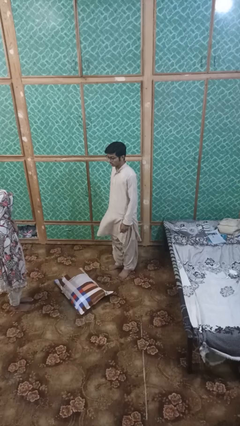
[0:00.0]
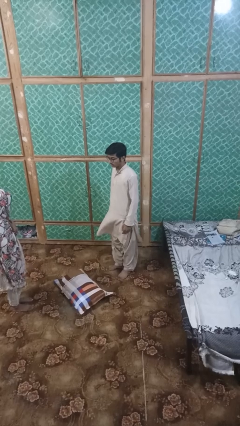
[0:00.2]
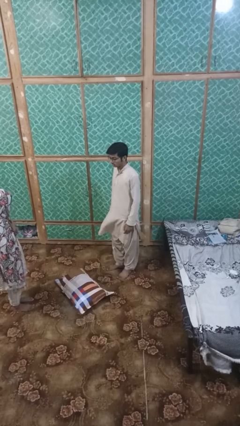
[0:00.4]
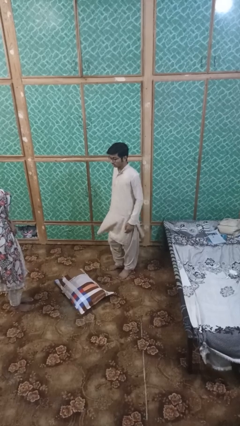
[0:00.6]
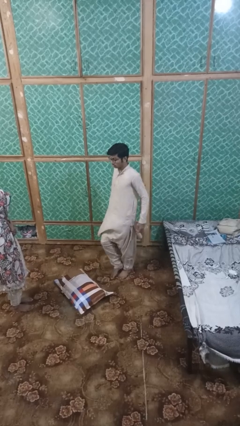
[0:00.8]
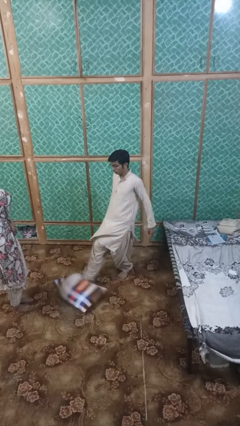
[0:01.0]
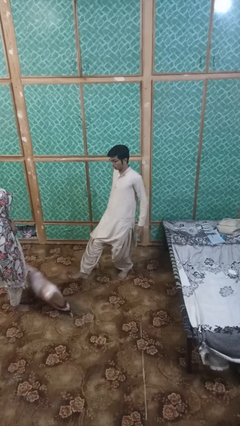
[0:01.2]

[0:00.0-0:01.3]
person kicks object to person

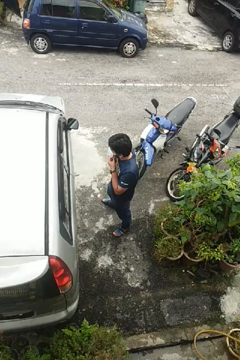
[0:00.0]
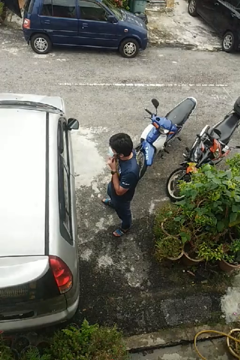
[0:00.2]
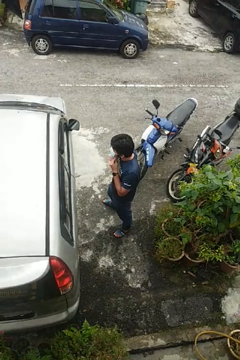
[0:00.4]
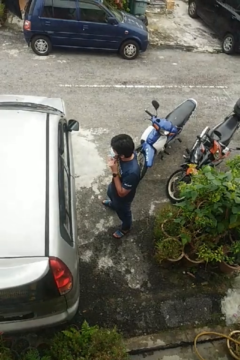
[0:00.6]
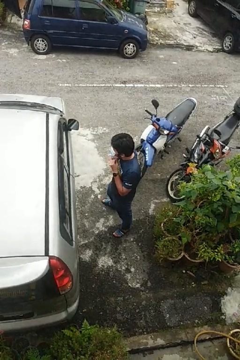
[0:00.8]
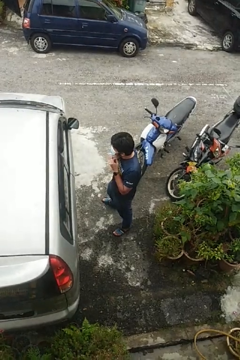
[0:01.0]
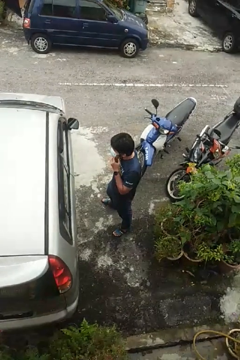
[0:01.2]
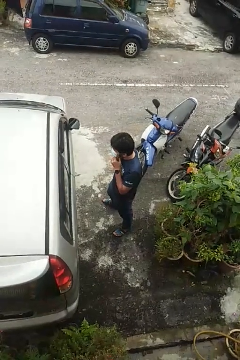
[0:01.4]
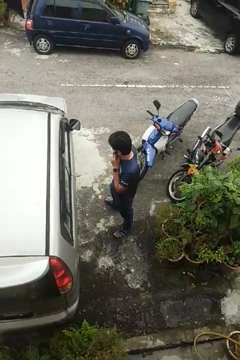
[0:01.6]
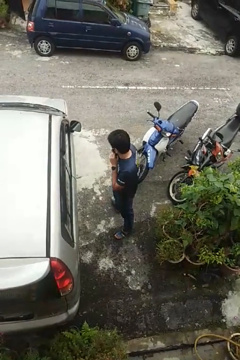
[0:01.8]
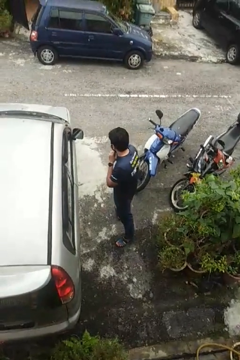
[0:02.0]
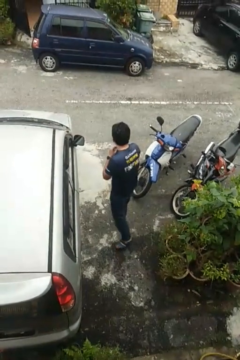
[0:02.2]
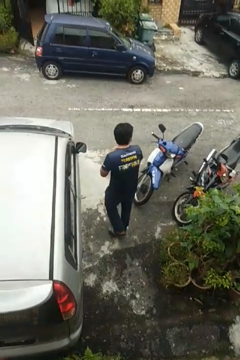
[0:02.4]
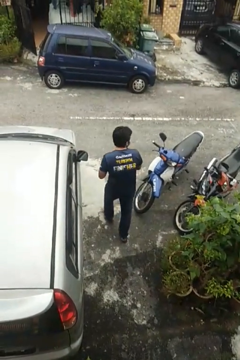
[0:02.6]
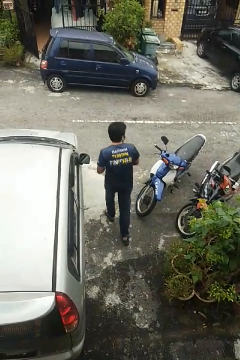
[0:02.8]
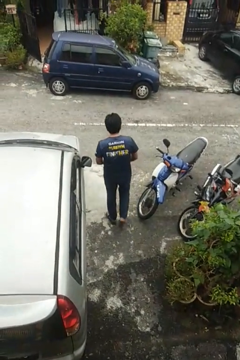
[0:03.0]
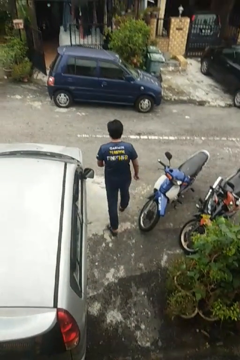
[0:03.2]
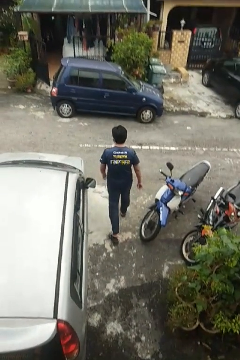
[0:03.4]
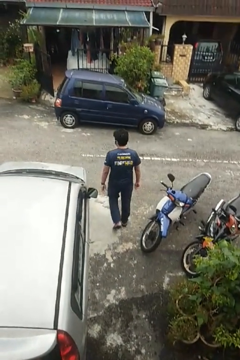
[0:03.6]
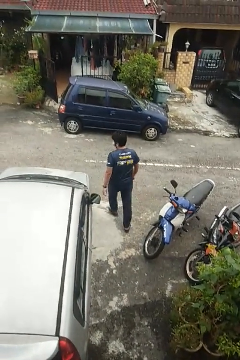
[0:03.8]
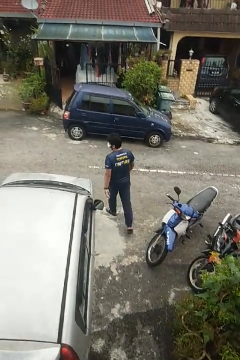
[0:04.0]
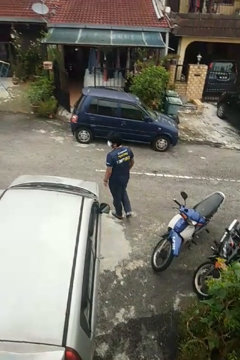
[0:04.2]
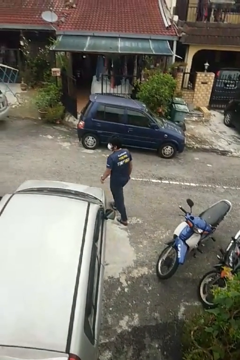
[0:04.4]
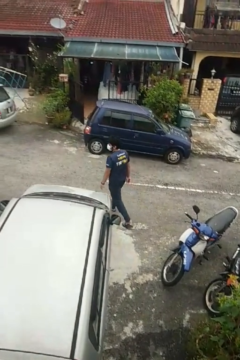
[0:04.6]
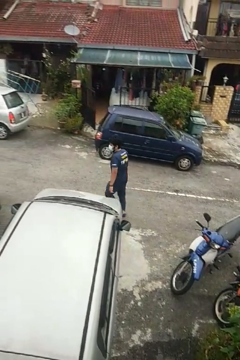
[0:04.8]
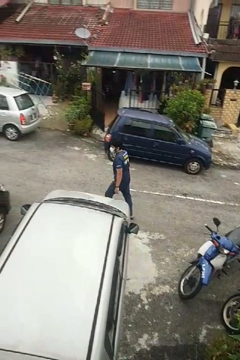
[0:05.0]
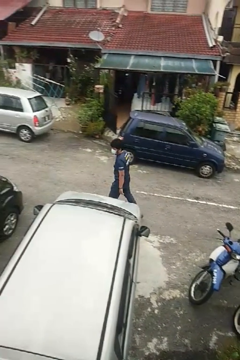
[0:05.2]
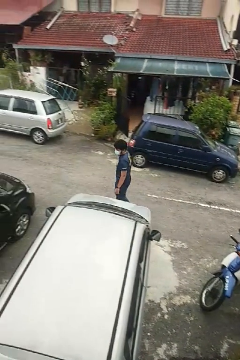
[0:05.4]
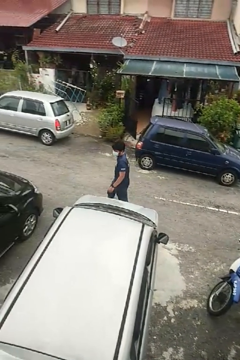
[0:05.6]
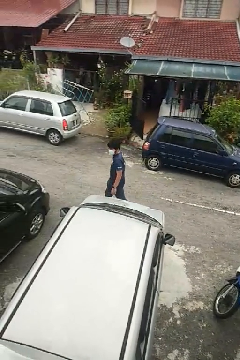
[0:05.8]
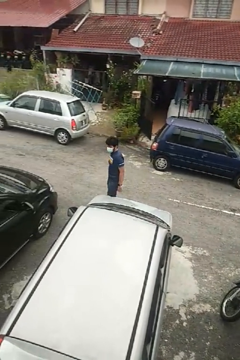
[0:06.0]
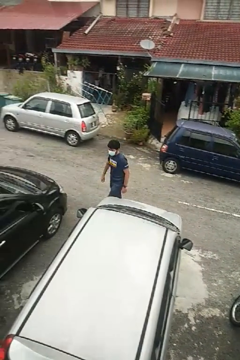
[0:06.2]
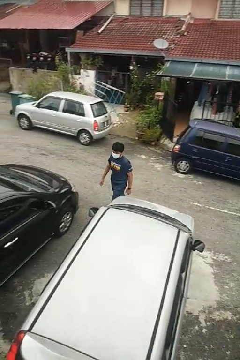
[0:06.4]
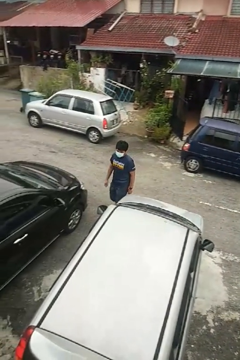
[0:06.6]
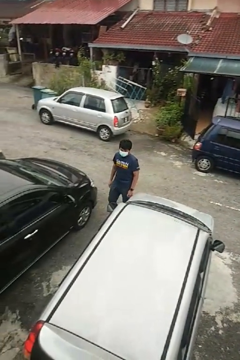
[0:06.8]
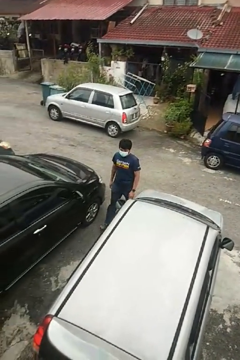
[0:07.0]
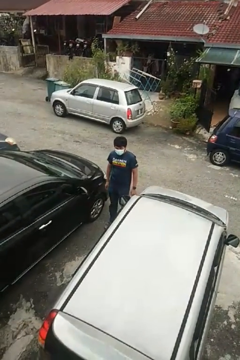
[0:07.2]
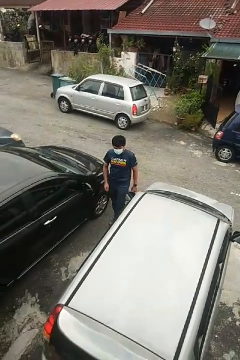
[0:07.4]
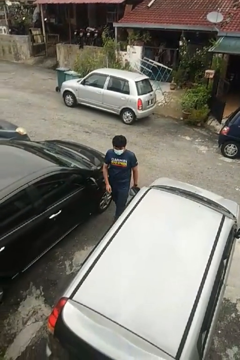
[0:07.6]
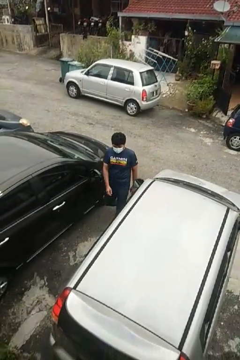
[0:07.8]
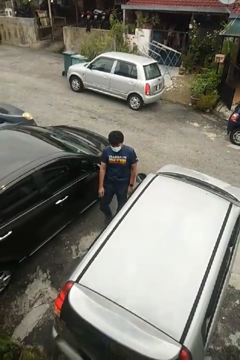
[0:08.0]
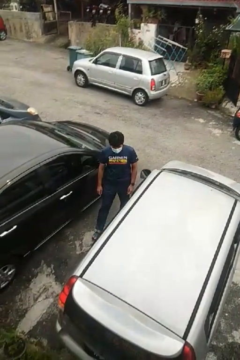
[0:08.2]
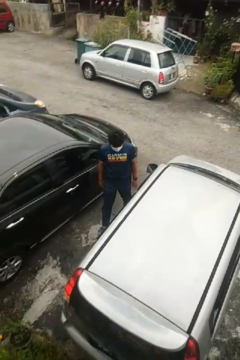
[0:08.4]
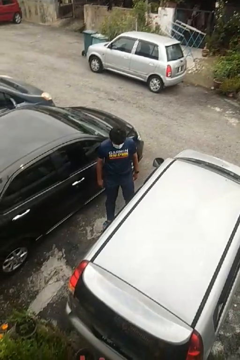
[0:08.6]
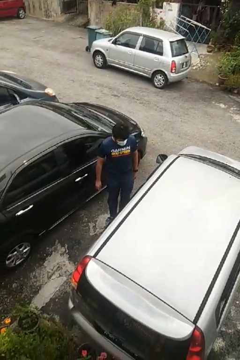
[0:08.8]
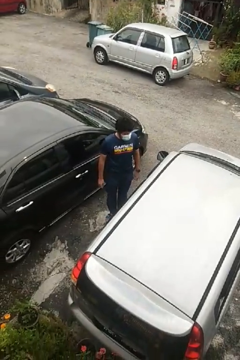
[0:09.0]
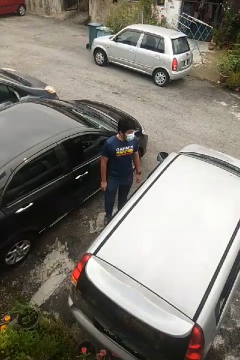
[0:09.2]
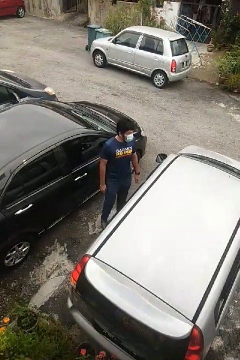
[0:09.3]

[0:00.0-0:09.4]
person walks around car

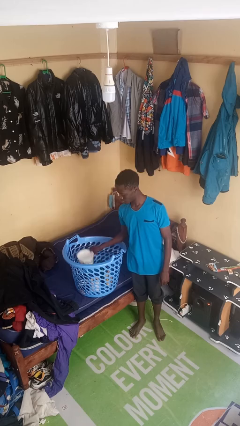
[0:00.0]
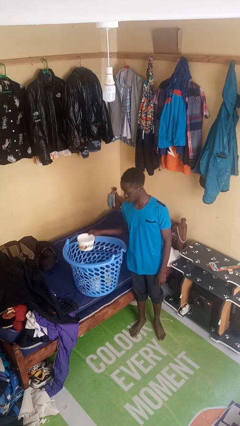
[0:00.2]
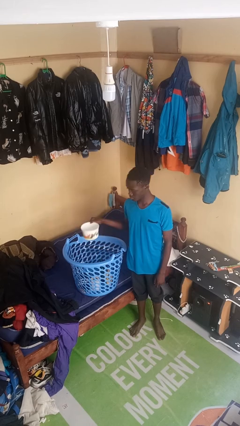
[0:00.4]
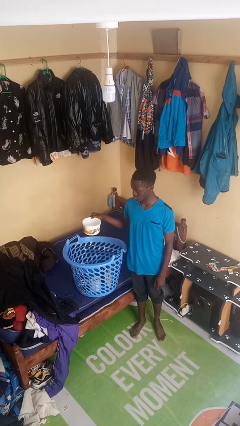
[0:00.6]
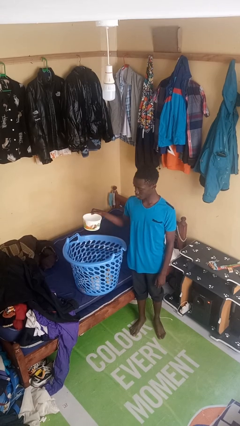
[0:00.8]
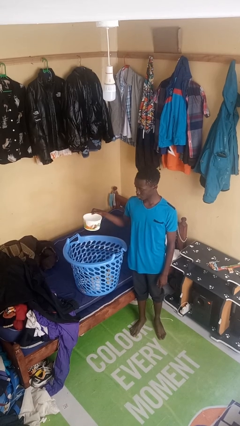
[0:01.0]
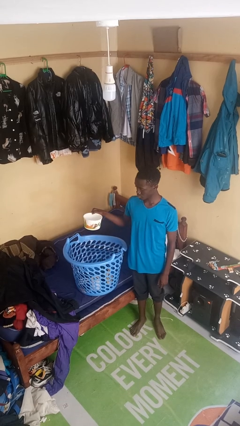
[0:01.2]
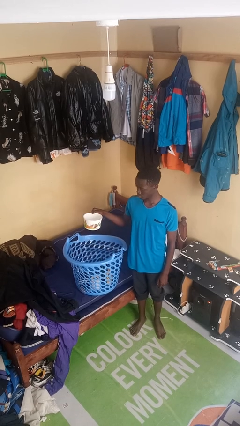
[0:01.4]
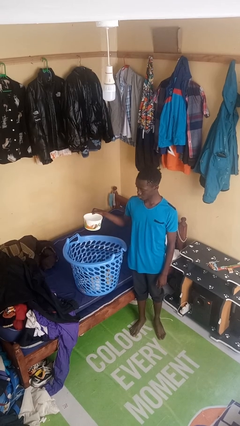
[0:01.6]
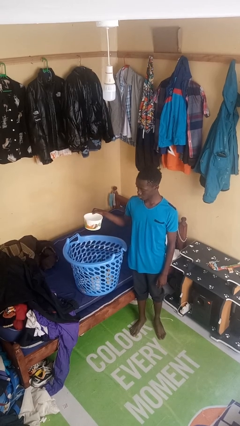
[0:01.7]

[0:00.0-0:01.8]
person takes object from basket

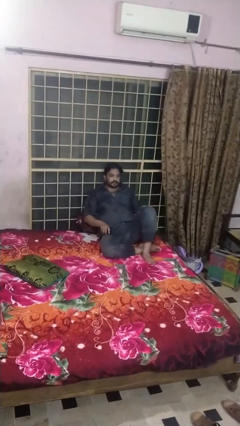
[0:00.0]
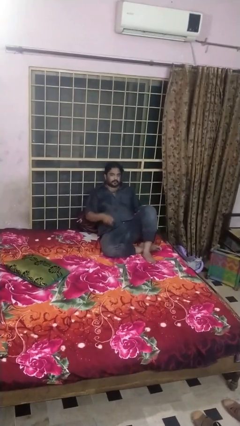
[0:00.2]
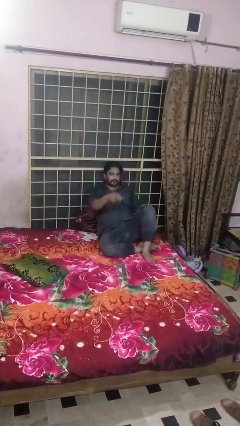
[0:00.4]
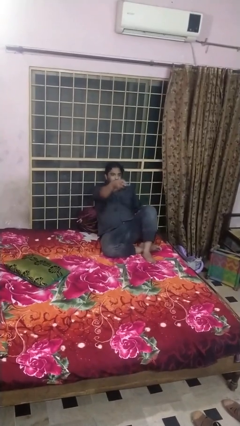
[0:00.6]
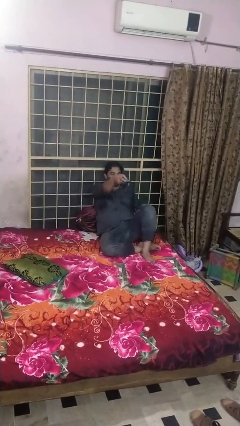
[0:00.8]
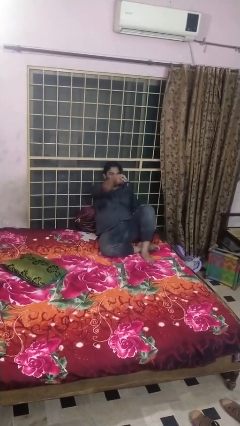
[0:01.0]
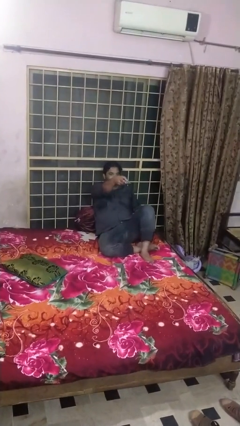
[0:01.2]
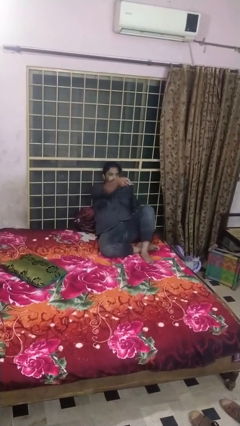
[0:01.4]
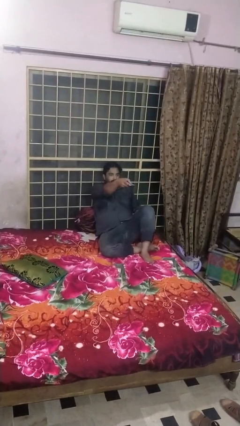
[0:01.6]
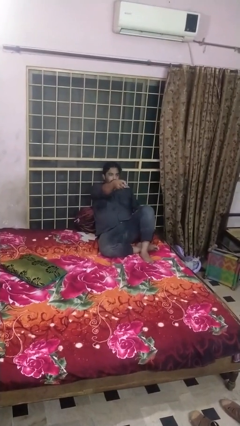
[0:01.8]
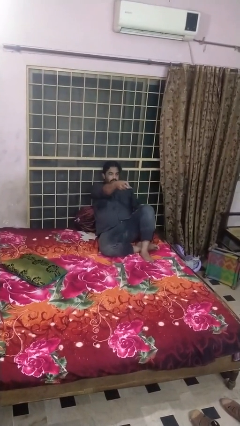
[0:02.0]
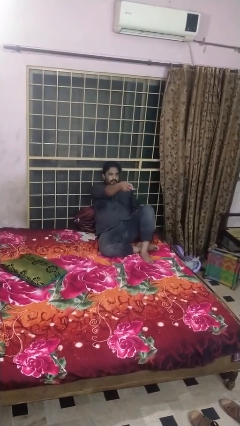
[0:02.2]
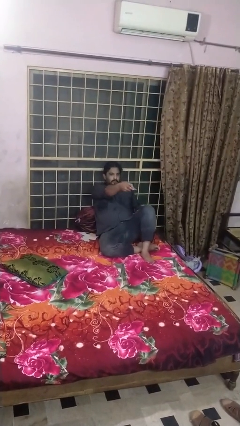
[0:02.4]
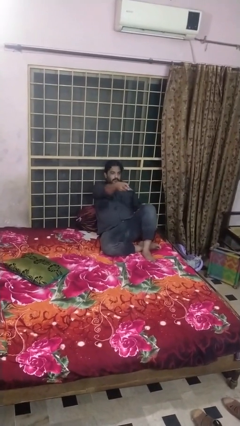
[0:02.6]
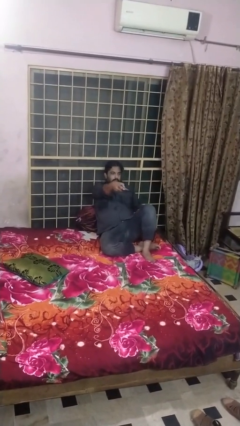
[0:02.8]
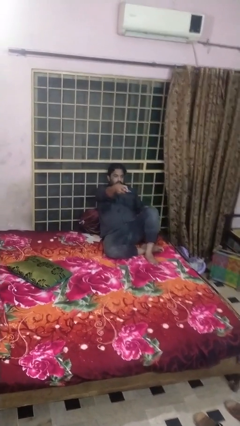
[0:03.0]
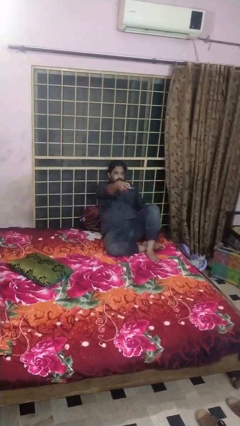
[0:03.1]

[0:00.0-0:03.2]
person uses television remote

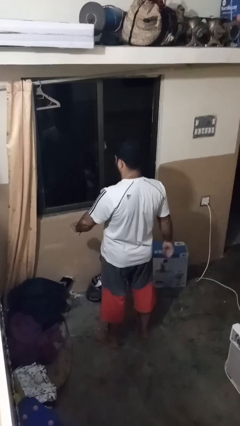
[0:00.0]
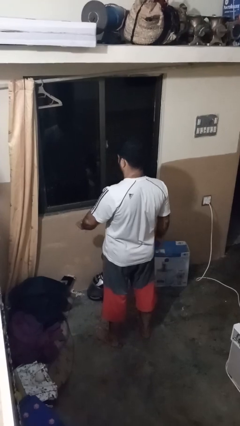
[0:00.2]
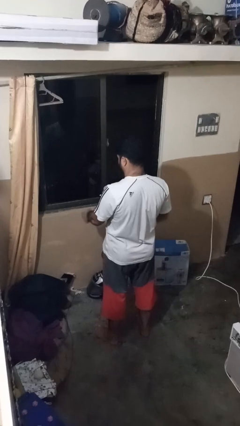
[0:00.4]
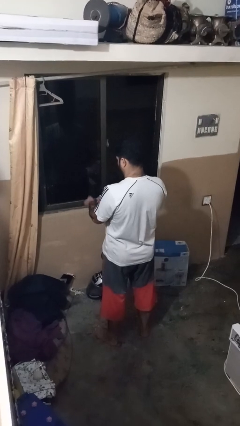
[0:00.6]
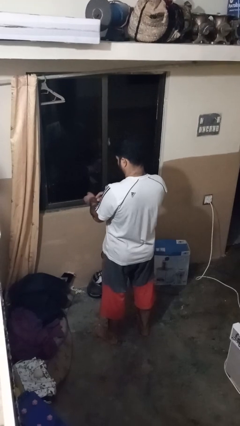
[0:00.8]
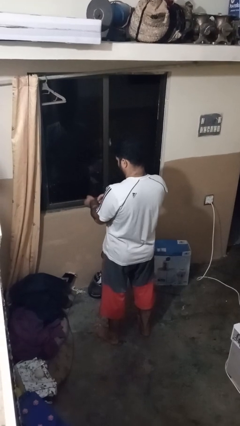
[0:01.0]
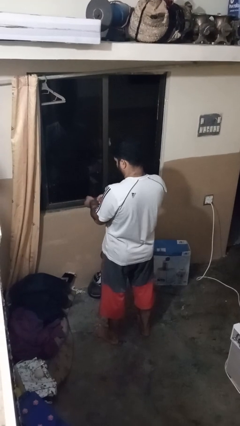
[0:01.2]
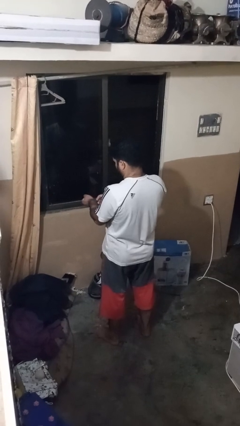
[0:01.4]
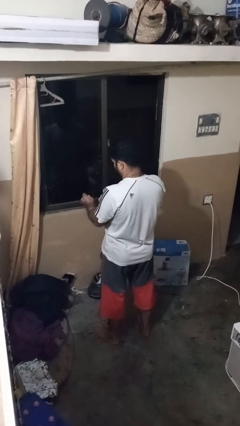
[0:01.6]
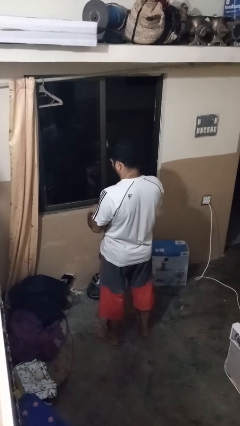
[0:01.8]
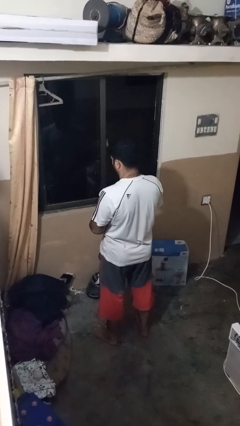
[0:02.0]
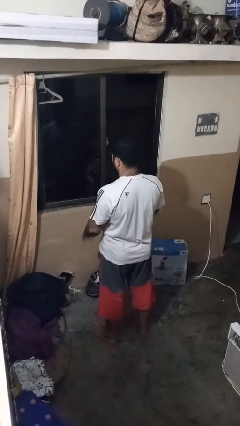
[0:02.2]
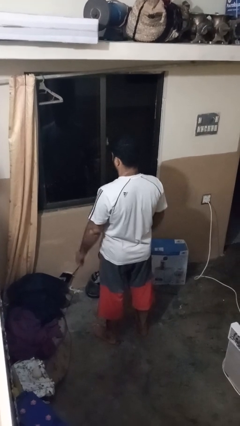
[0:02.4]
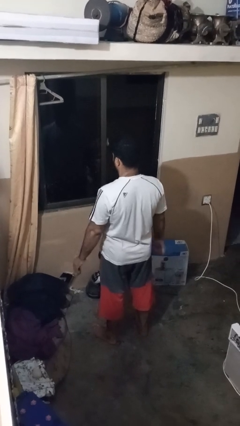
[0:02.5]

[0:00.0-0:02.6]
person takes off wristwatch

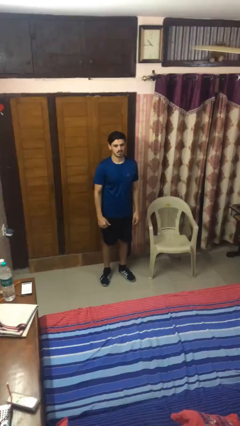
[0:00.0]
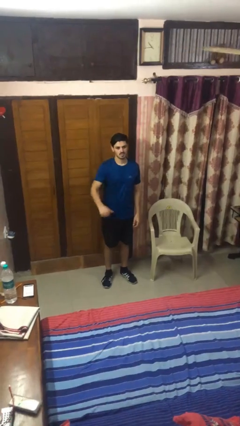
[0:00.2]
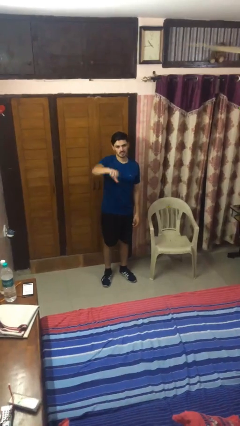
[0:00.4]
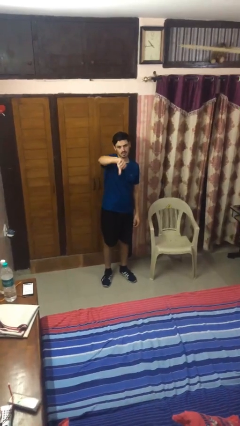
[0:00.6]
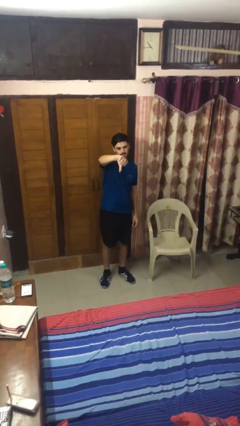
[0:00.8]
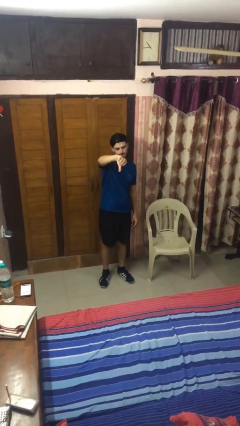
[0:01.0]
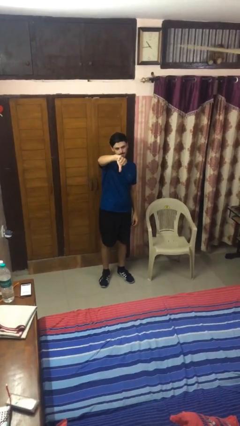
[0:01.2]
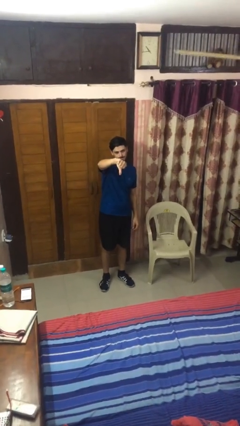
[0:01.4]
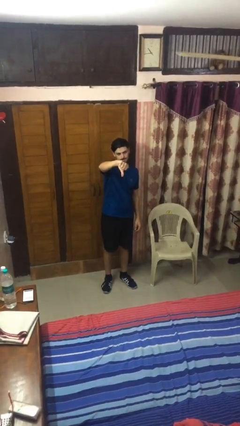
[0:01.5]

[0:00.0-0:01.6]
person gestures thumbs down
